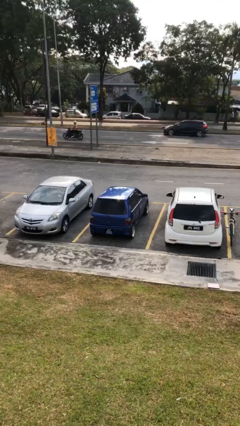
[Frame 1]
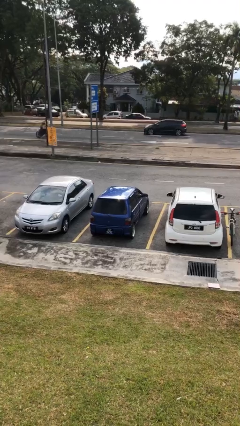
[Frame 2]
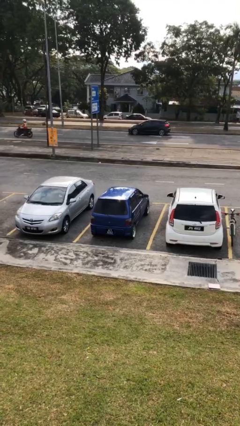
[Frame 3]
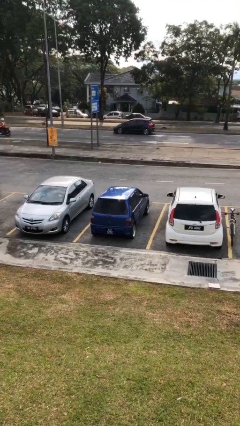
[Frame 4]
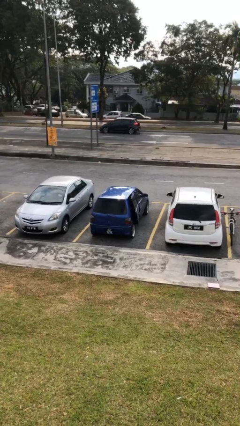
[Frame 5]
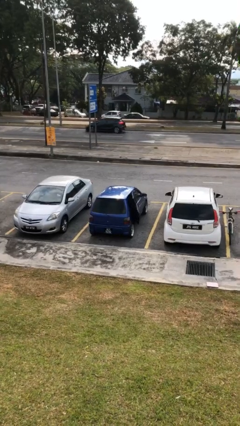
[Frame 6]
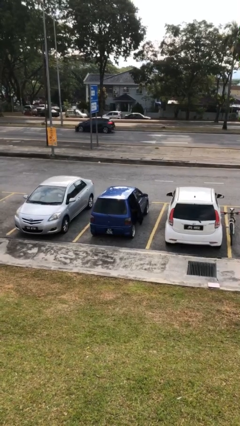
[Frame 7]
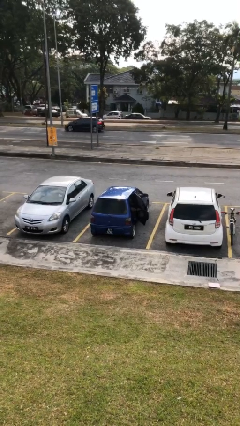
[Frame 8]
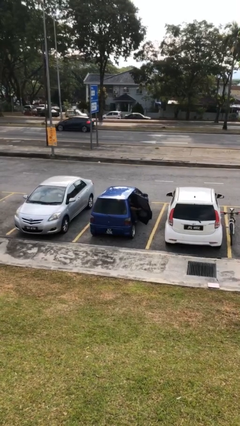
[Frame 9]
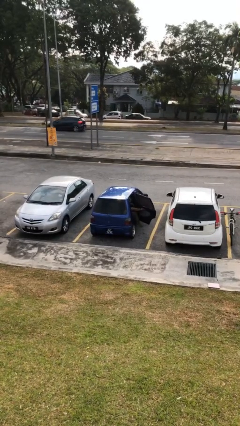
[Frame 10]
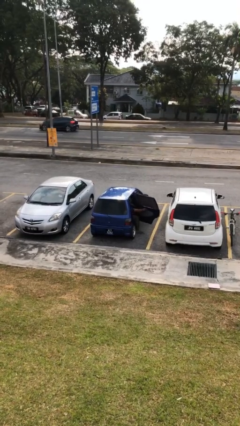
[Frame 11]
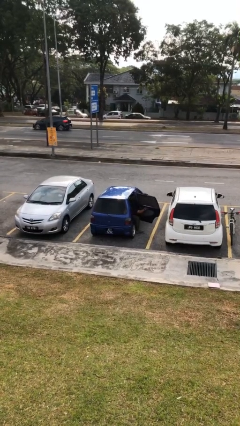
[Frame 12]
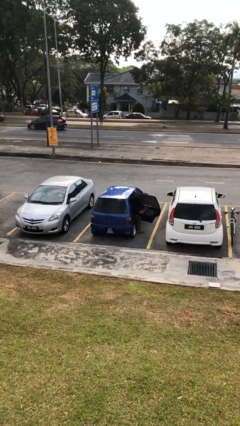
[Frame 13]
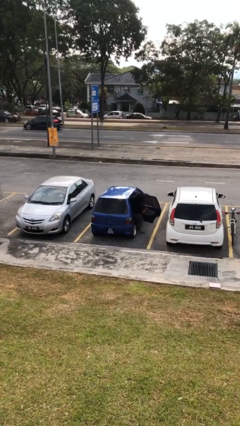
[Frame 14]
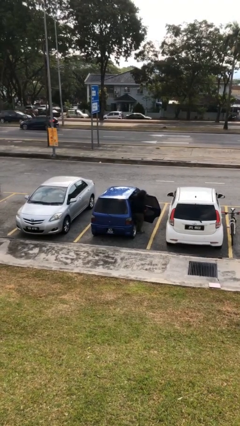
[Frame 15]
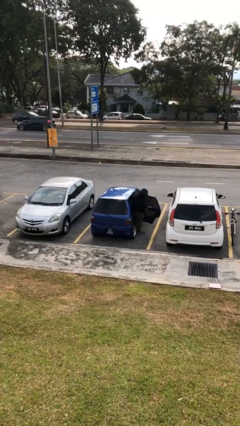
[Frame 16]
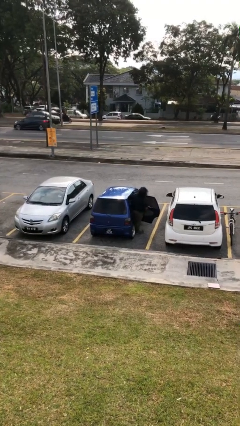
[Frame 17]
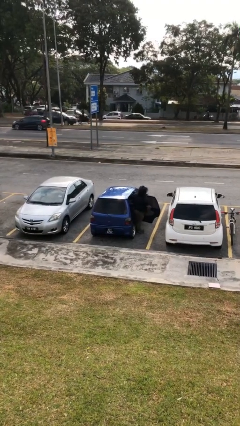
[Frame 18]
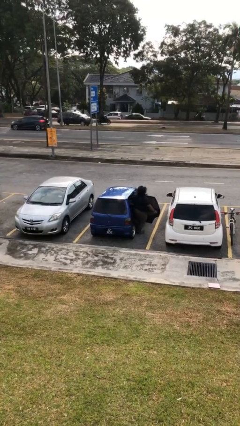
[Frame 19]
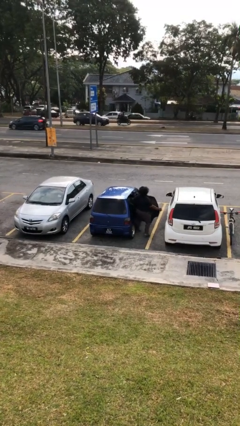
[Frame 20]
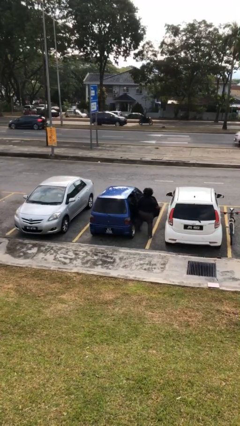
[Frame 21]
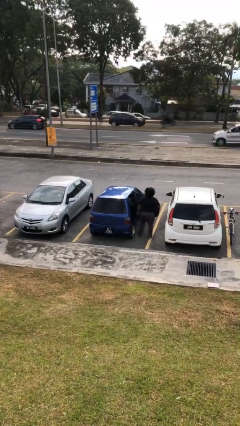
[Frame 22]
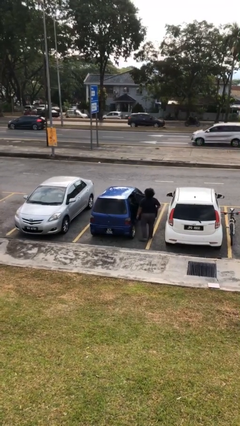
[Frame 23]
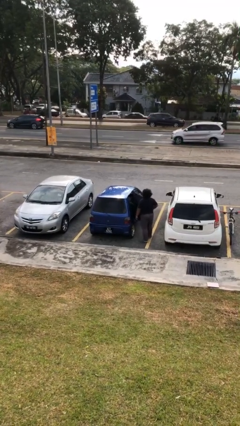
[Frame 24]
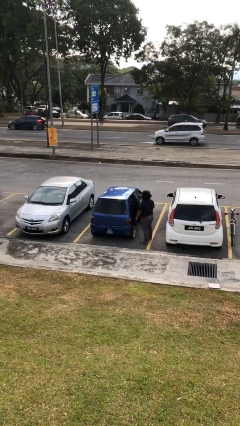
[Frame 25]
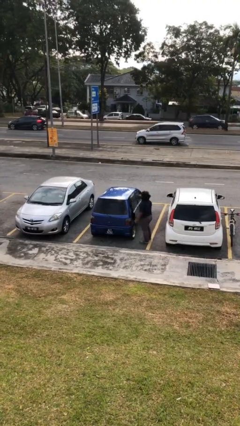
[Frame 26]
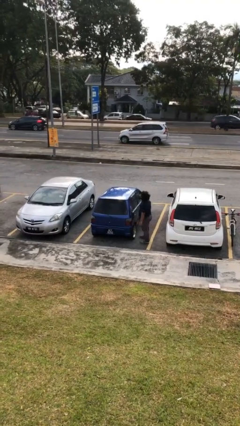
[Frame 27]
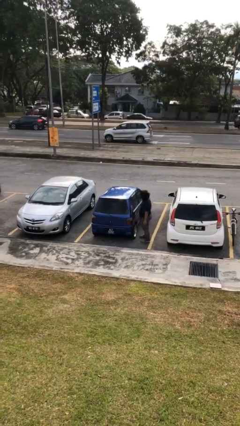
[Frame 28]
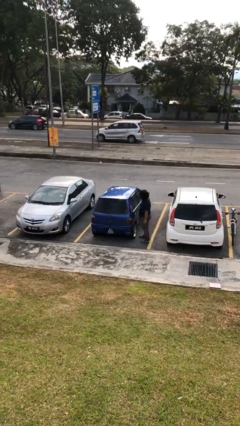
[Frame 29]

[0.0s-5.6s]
car drops off person

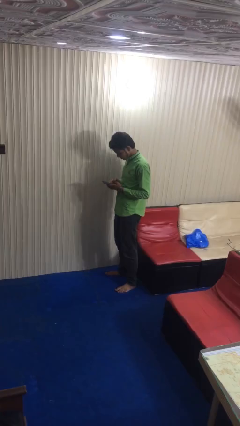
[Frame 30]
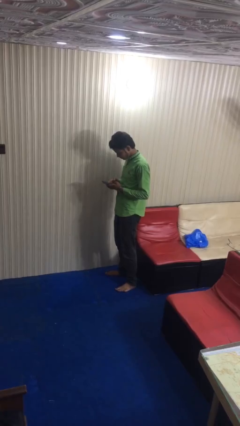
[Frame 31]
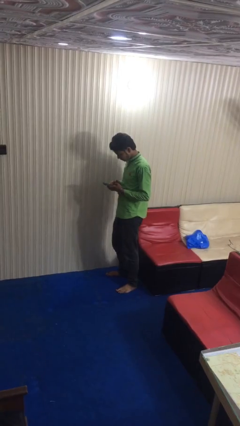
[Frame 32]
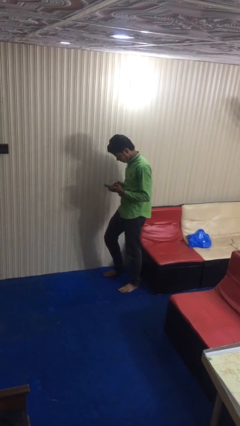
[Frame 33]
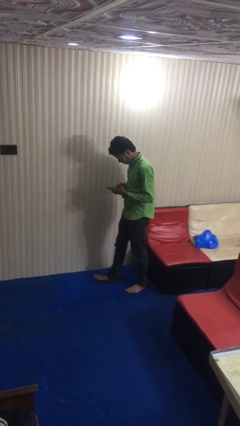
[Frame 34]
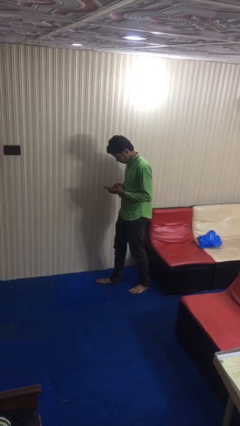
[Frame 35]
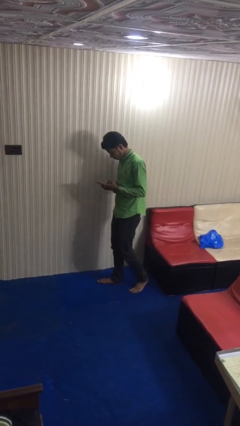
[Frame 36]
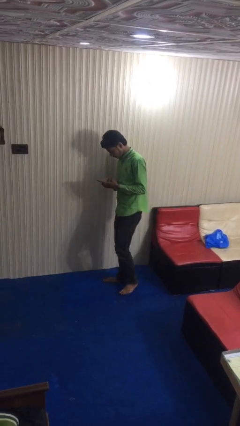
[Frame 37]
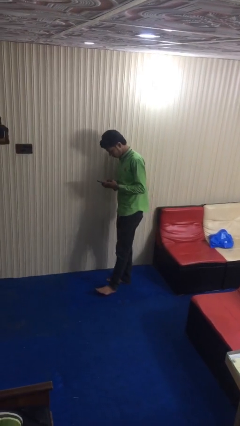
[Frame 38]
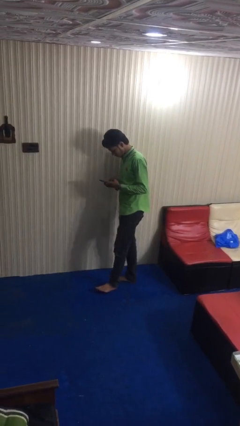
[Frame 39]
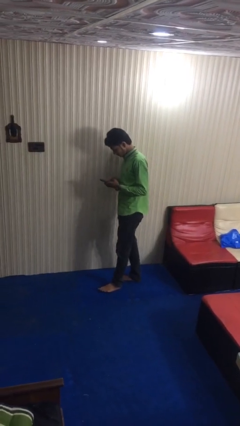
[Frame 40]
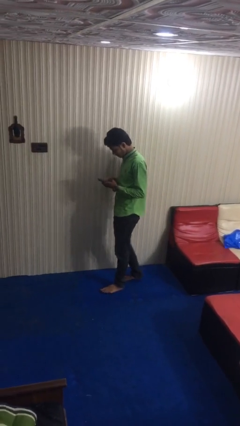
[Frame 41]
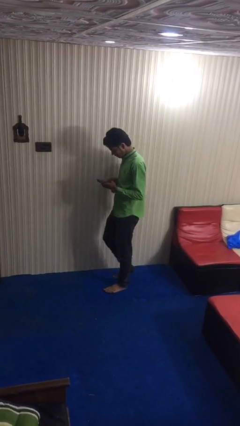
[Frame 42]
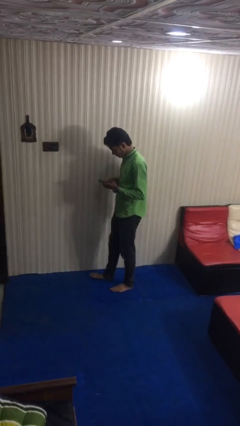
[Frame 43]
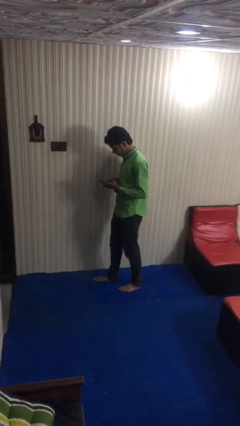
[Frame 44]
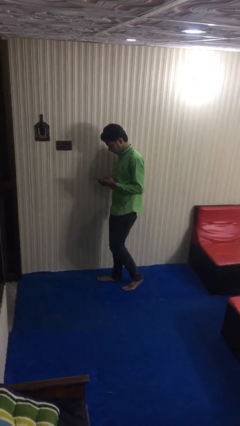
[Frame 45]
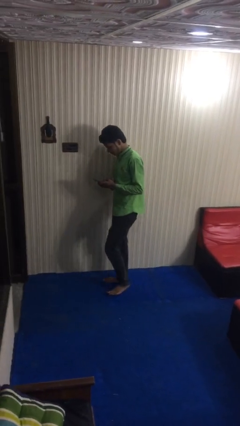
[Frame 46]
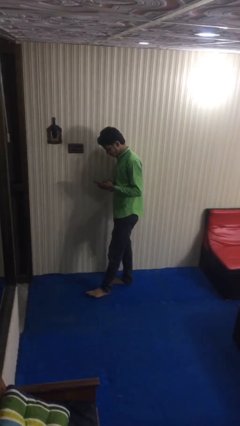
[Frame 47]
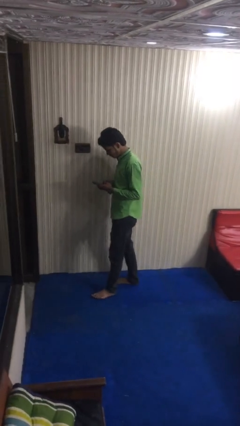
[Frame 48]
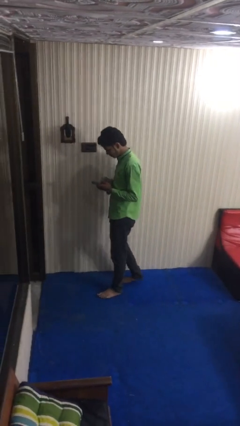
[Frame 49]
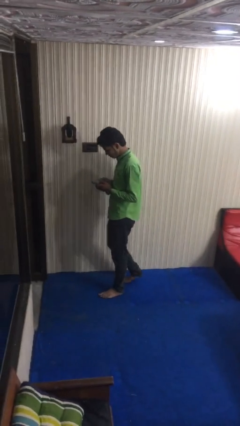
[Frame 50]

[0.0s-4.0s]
person texts on phone

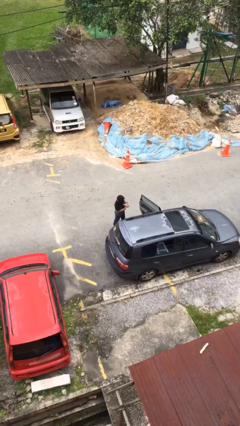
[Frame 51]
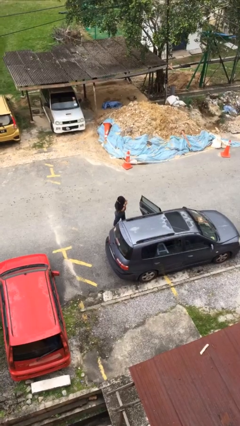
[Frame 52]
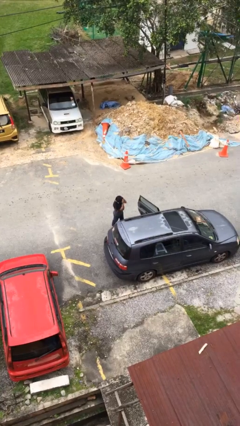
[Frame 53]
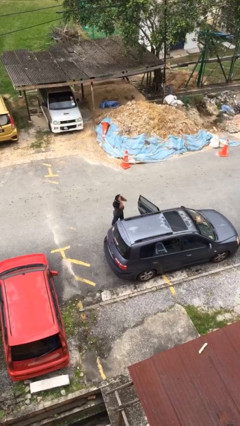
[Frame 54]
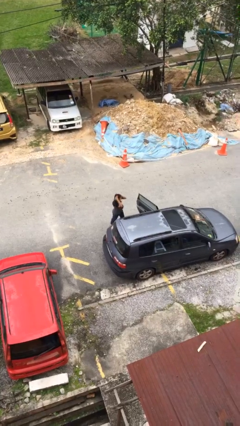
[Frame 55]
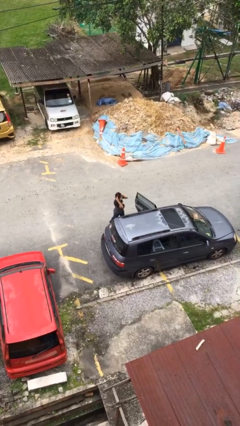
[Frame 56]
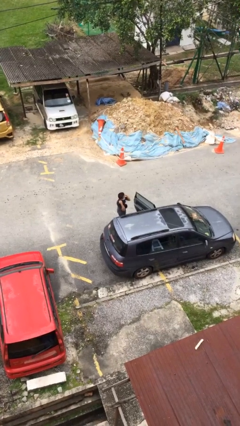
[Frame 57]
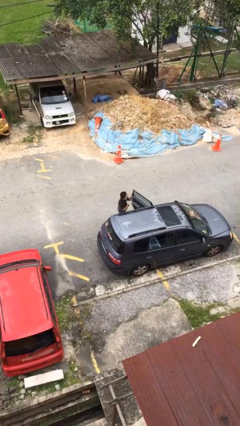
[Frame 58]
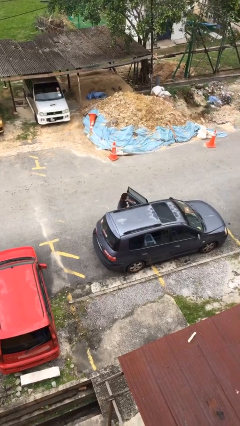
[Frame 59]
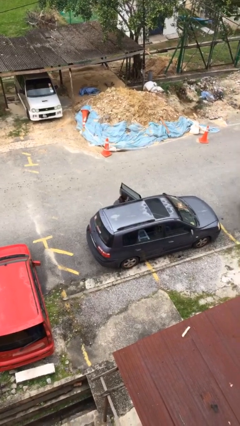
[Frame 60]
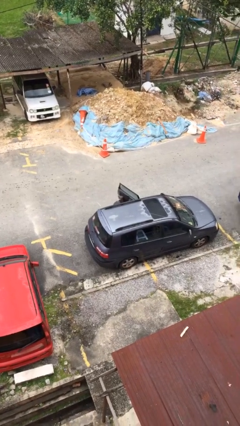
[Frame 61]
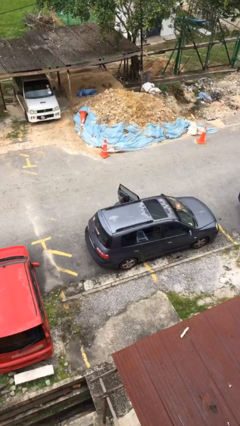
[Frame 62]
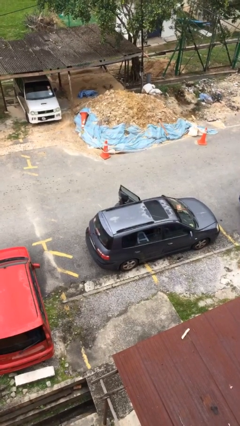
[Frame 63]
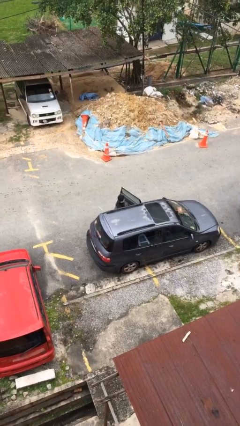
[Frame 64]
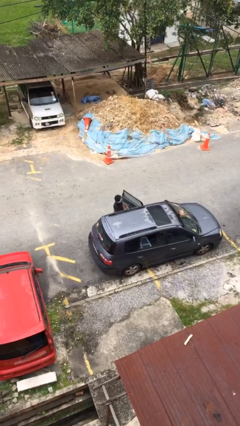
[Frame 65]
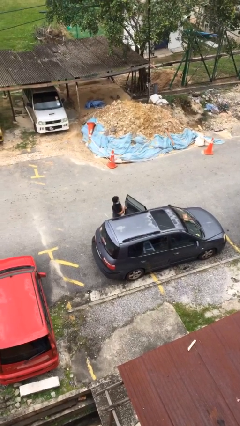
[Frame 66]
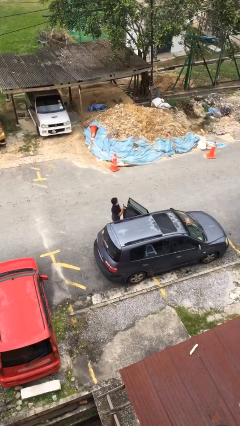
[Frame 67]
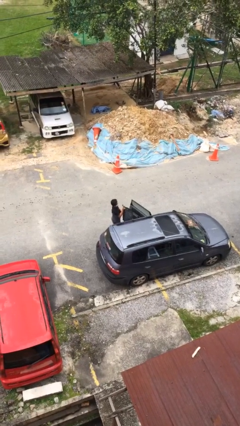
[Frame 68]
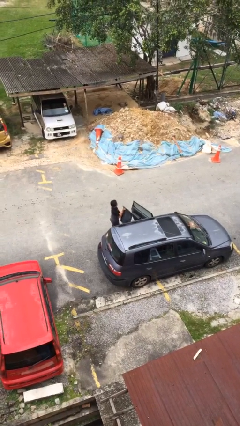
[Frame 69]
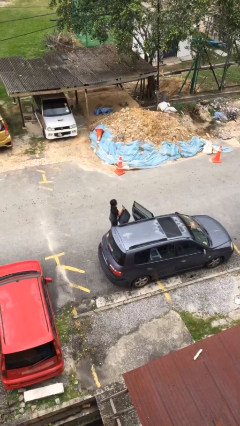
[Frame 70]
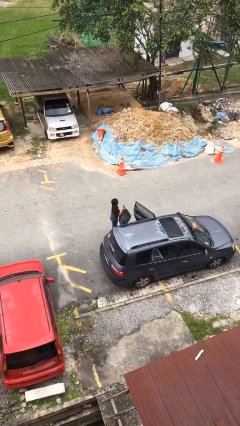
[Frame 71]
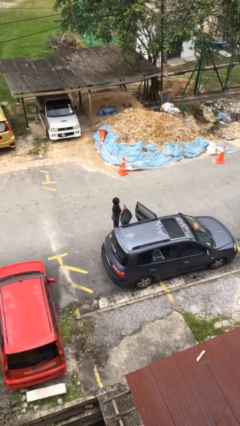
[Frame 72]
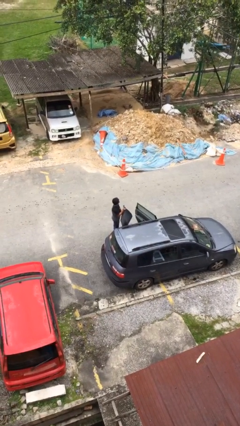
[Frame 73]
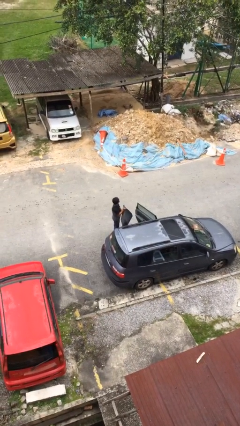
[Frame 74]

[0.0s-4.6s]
person unloads car

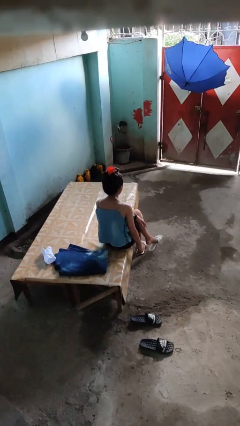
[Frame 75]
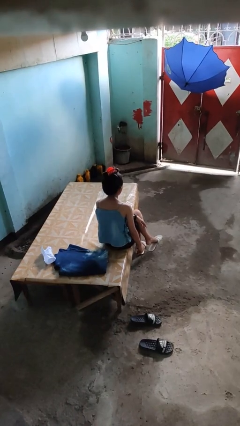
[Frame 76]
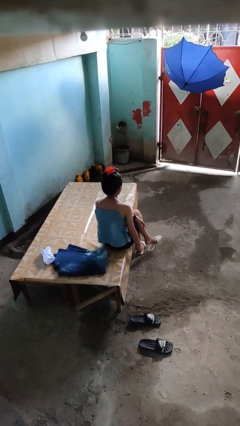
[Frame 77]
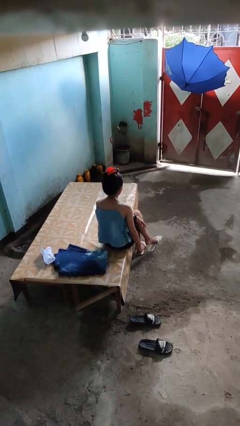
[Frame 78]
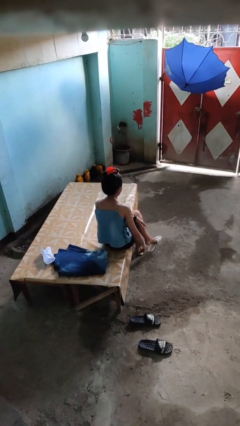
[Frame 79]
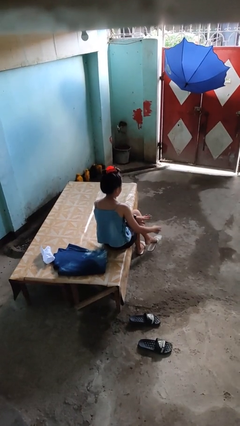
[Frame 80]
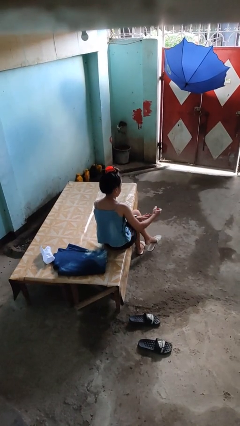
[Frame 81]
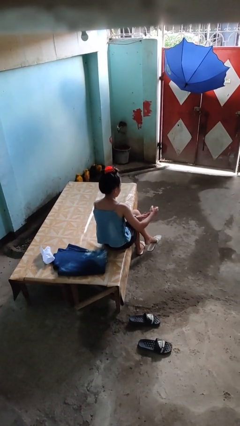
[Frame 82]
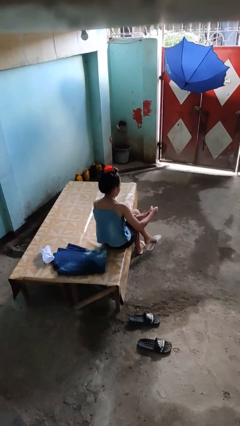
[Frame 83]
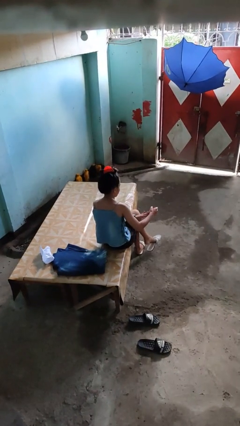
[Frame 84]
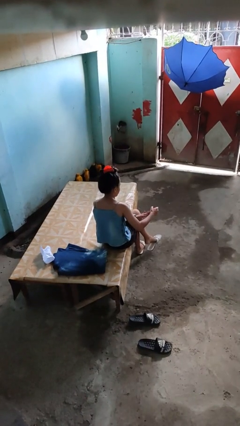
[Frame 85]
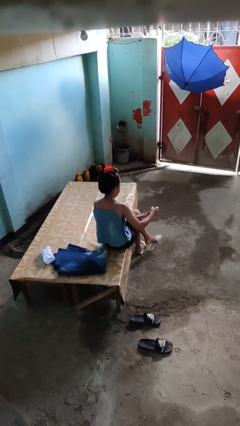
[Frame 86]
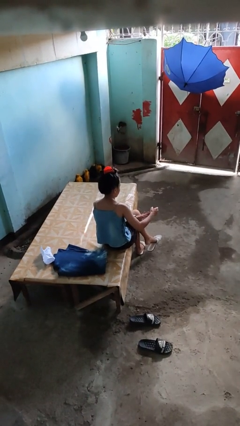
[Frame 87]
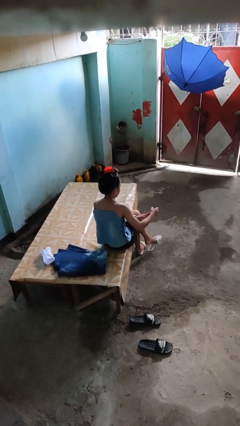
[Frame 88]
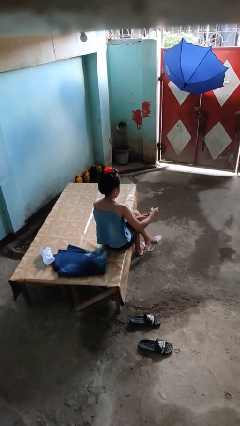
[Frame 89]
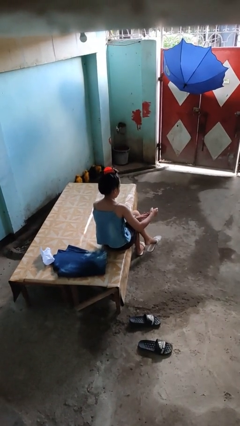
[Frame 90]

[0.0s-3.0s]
person clips fingernails

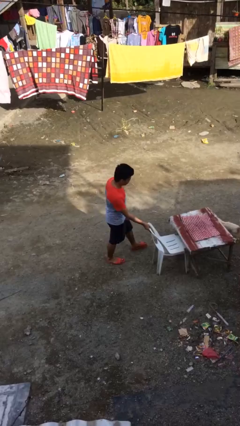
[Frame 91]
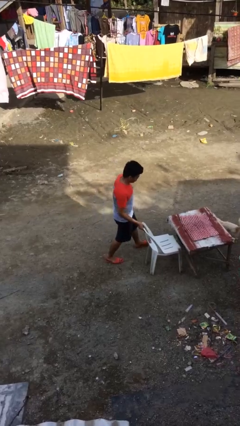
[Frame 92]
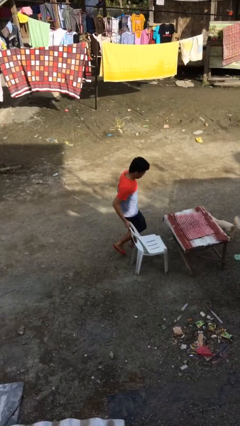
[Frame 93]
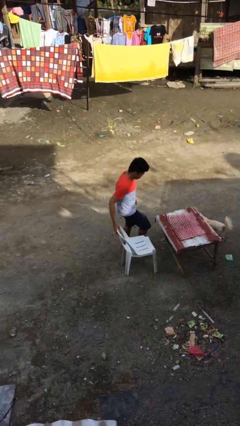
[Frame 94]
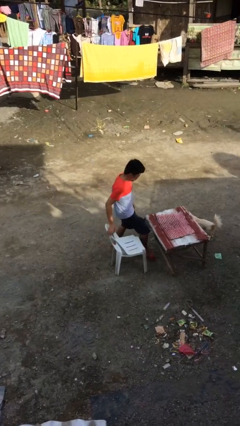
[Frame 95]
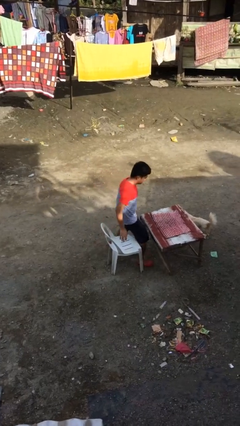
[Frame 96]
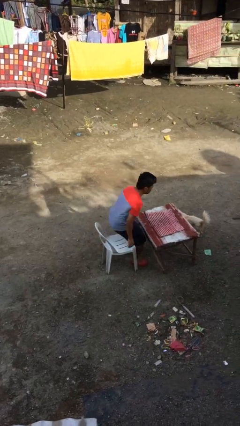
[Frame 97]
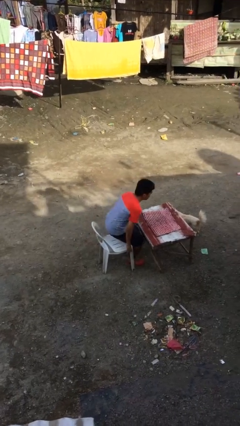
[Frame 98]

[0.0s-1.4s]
person stands up
